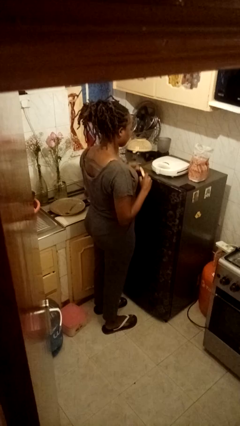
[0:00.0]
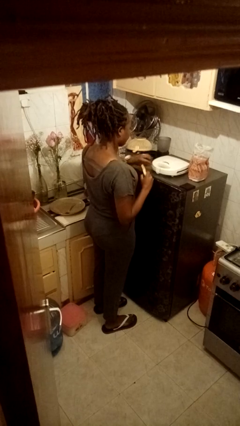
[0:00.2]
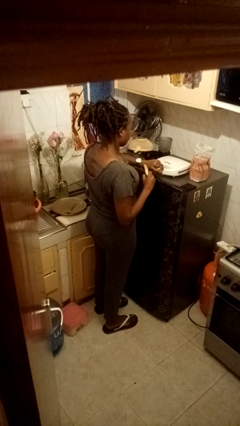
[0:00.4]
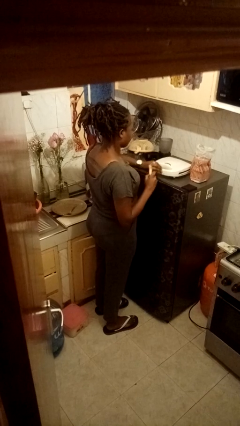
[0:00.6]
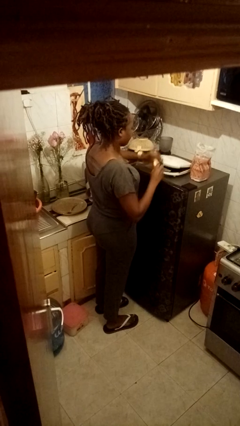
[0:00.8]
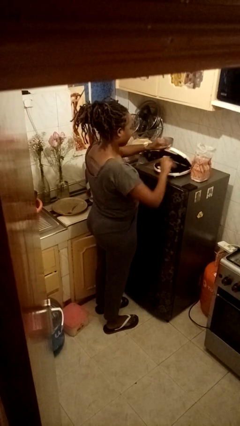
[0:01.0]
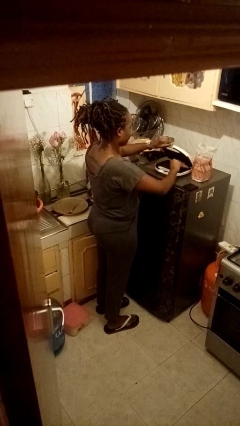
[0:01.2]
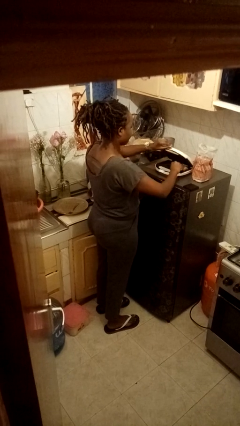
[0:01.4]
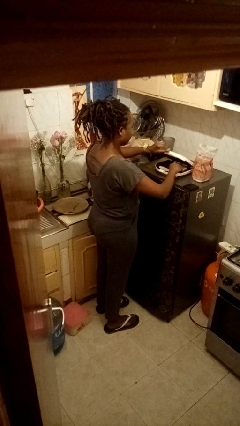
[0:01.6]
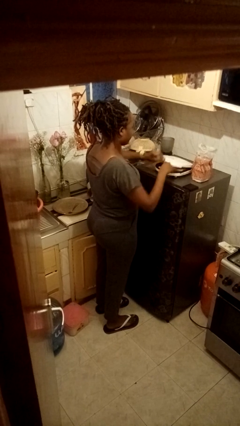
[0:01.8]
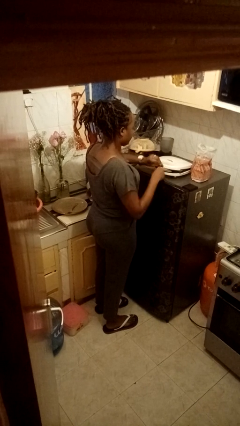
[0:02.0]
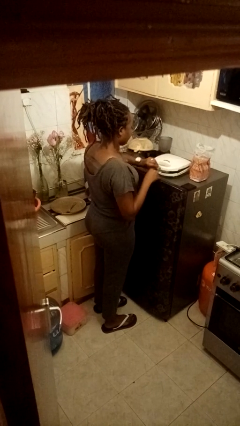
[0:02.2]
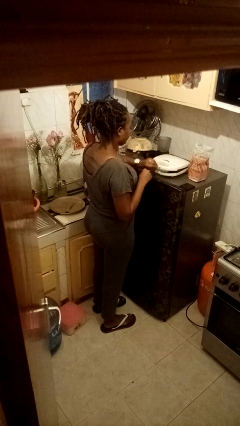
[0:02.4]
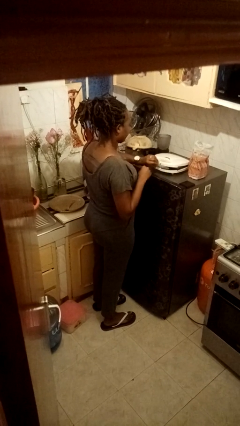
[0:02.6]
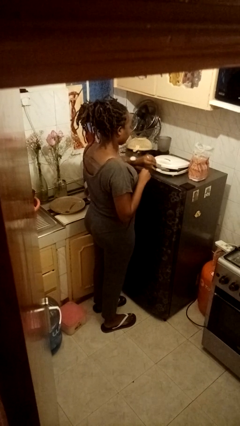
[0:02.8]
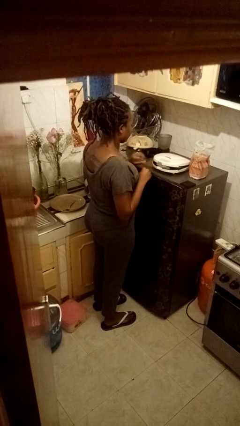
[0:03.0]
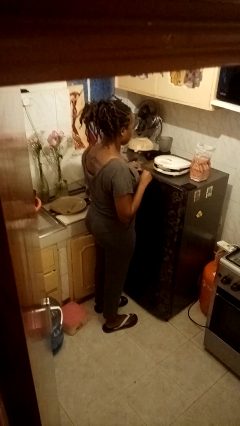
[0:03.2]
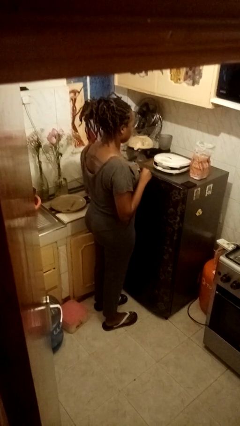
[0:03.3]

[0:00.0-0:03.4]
person puts object into toaster

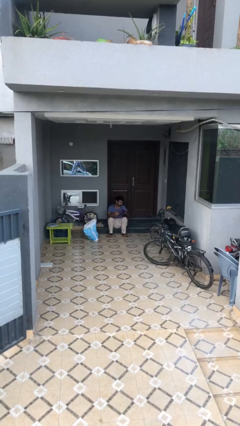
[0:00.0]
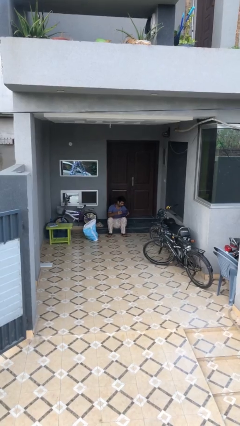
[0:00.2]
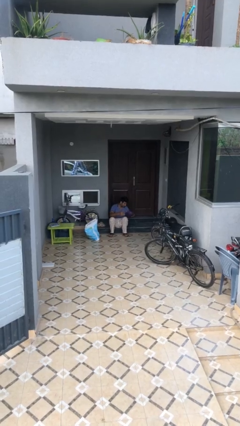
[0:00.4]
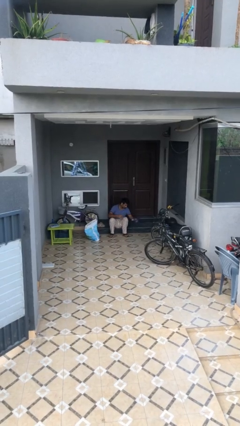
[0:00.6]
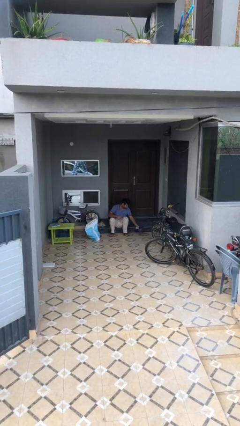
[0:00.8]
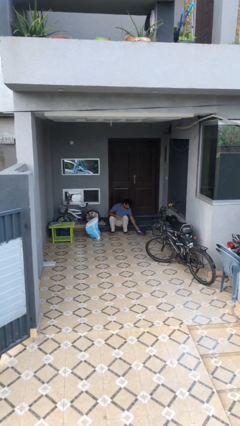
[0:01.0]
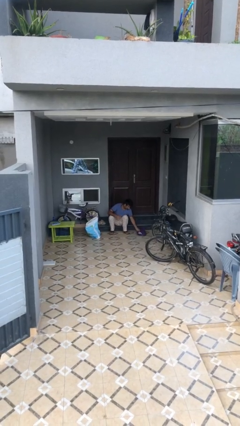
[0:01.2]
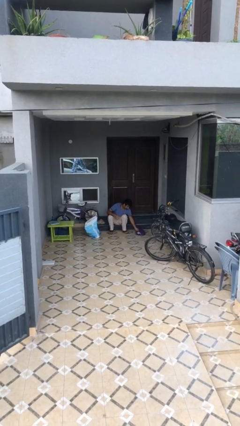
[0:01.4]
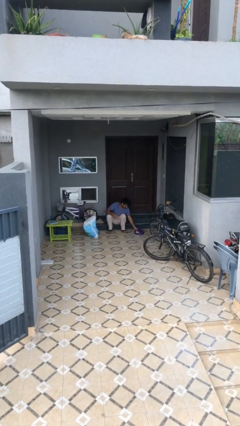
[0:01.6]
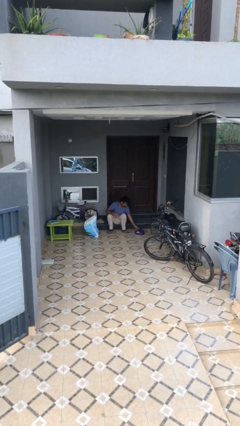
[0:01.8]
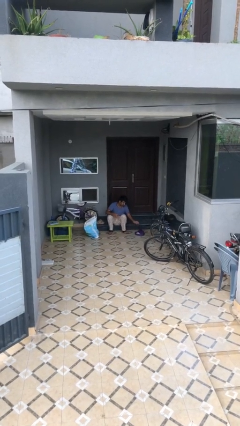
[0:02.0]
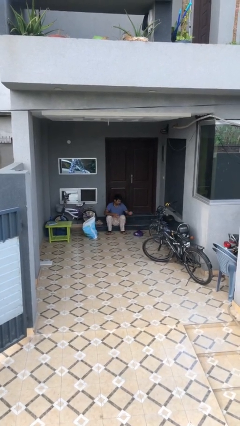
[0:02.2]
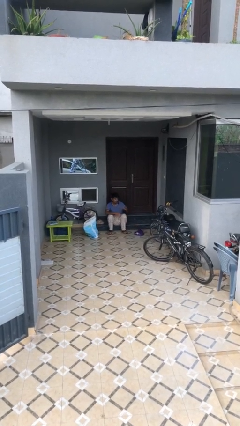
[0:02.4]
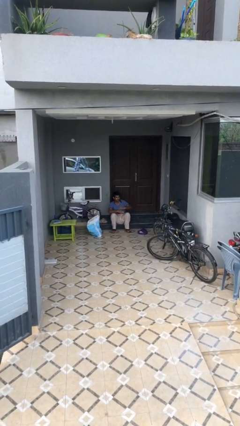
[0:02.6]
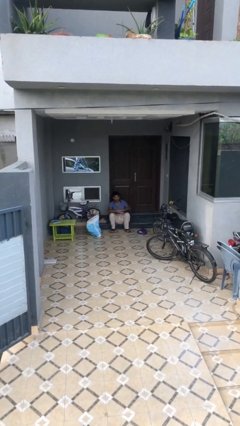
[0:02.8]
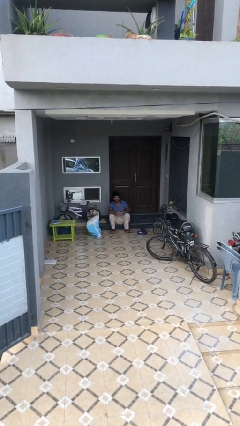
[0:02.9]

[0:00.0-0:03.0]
person puts down object on floor

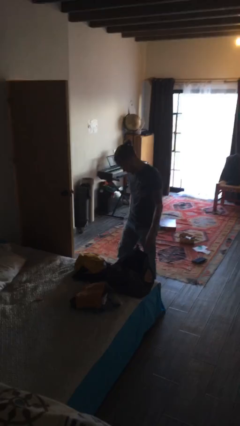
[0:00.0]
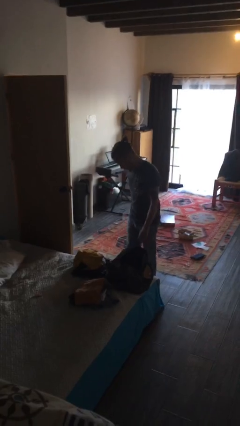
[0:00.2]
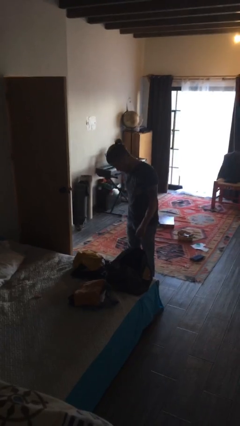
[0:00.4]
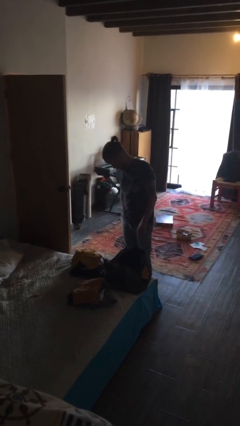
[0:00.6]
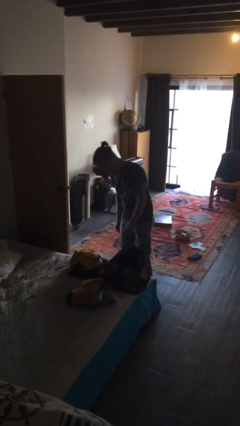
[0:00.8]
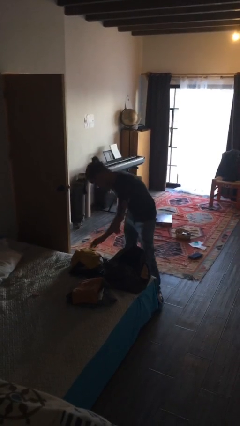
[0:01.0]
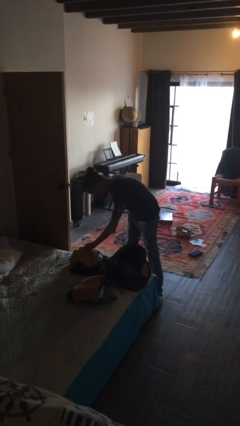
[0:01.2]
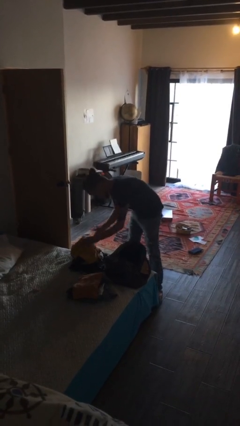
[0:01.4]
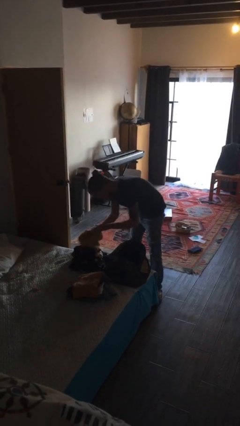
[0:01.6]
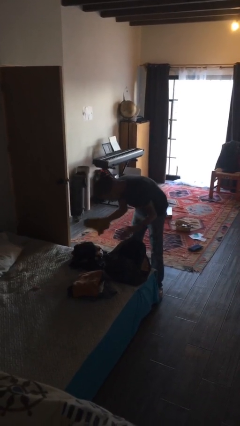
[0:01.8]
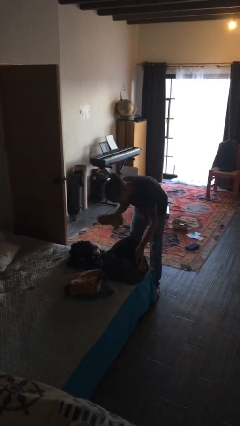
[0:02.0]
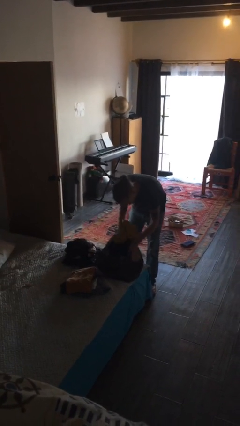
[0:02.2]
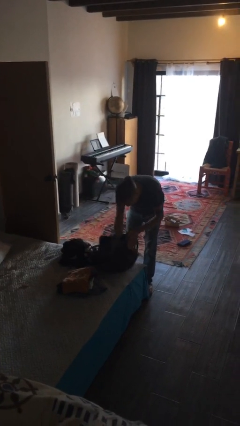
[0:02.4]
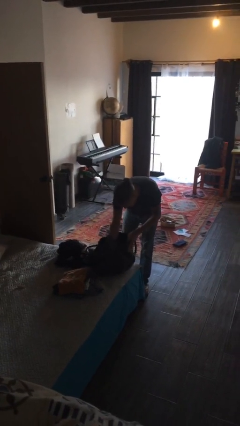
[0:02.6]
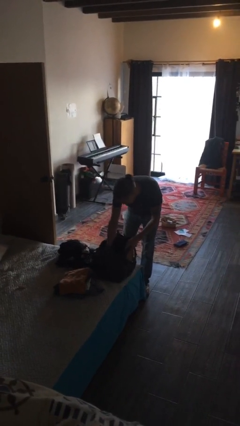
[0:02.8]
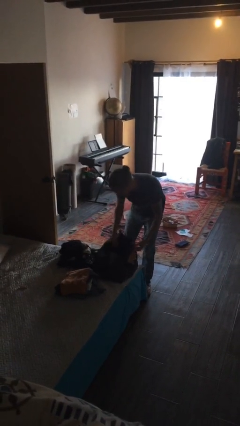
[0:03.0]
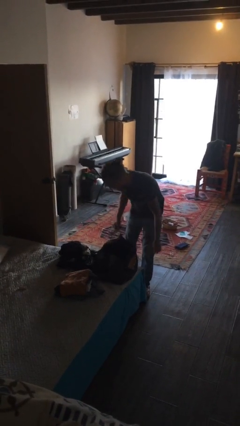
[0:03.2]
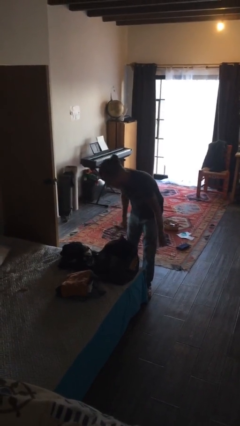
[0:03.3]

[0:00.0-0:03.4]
person loads clothes into suitcase

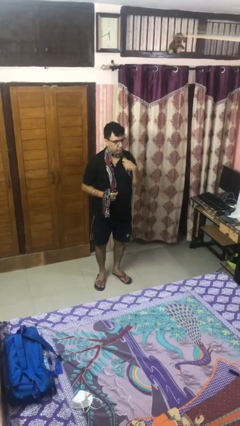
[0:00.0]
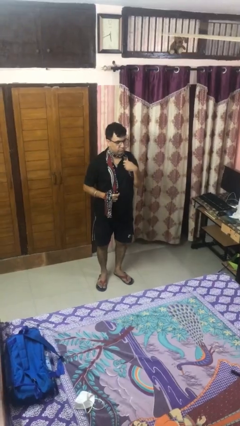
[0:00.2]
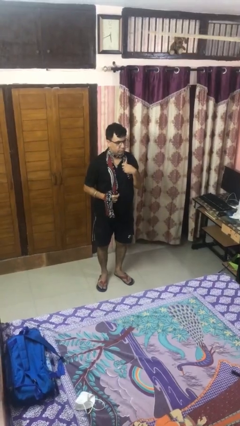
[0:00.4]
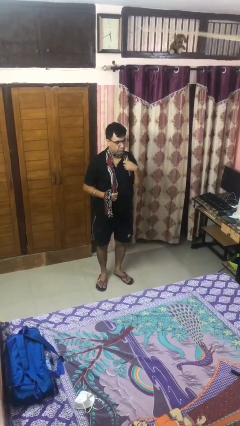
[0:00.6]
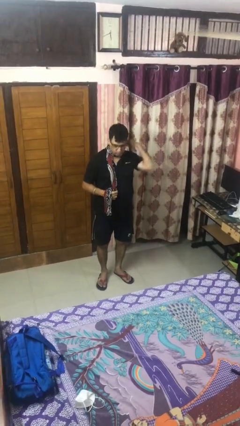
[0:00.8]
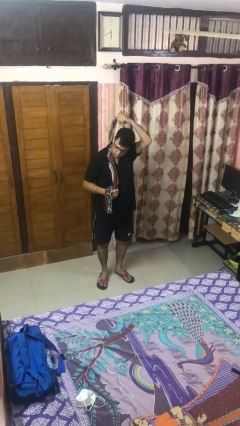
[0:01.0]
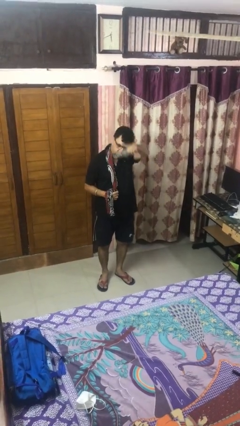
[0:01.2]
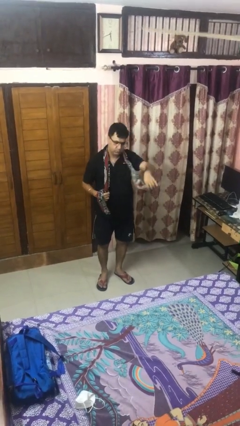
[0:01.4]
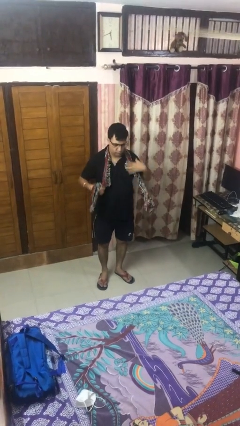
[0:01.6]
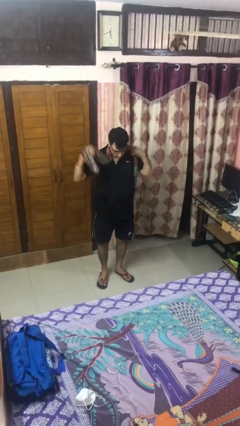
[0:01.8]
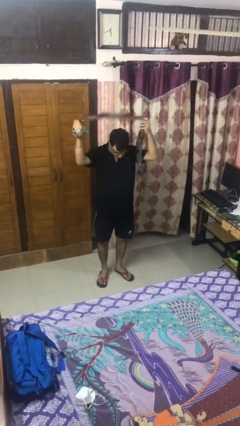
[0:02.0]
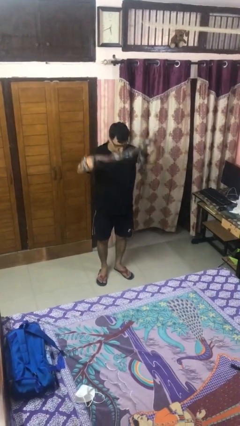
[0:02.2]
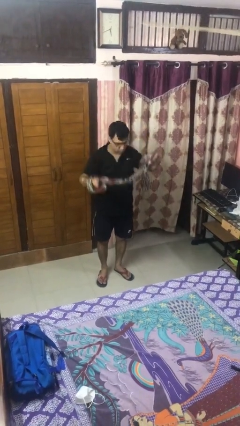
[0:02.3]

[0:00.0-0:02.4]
person takes off scarf

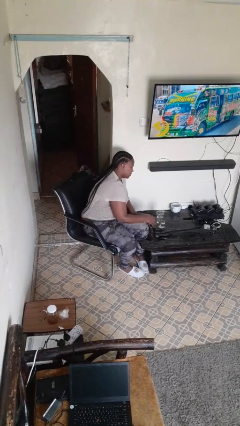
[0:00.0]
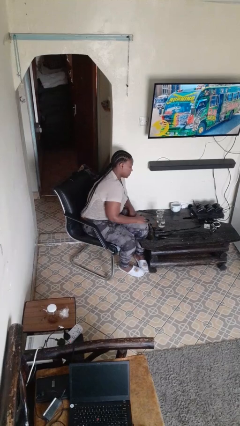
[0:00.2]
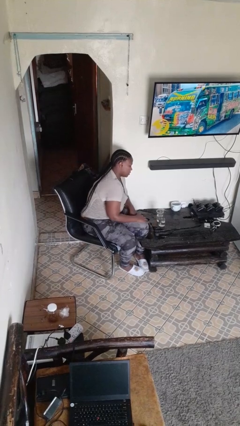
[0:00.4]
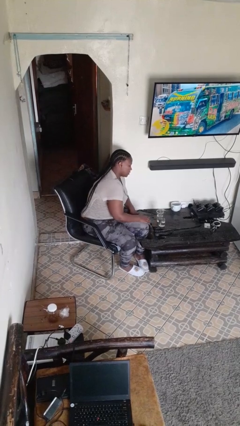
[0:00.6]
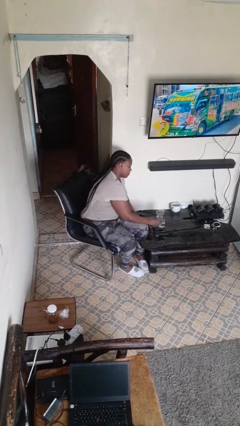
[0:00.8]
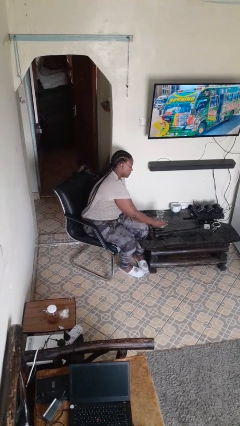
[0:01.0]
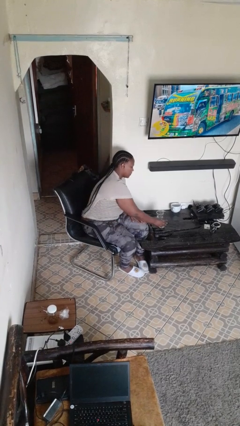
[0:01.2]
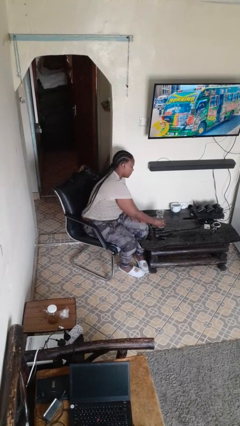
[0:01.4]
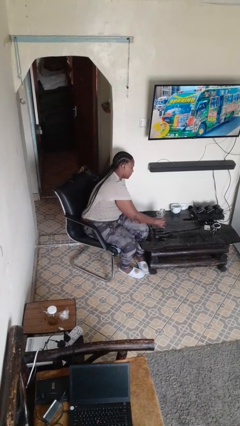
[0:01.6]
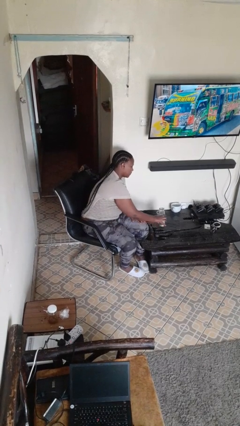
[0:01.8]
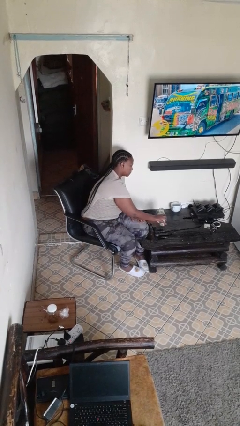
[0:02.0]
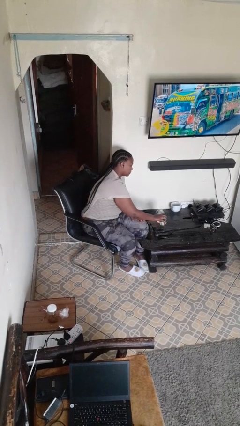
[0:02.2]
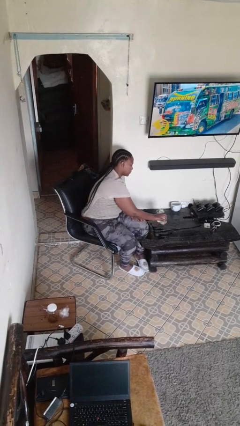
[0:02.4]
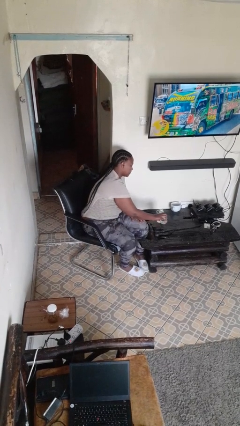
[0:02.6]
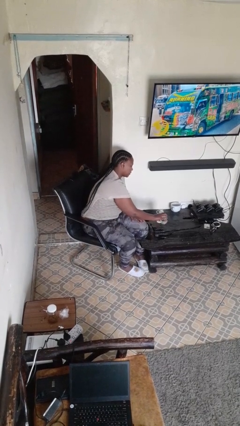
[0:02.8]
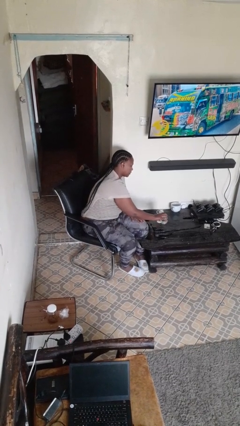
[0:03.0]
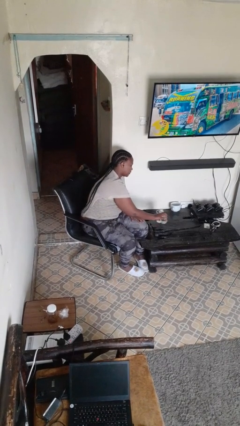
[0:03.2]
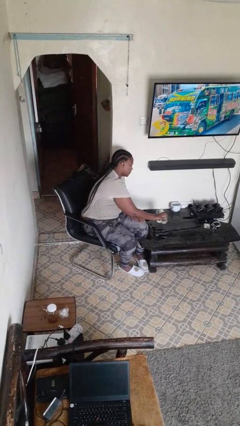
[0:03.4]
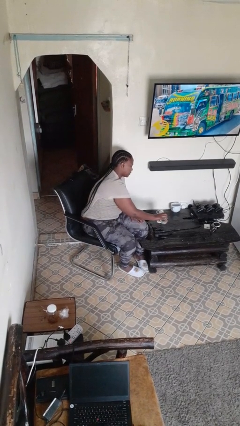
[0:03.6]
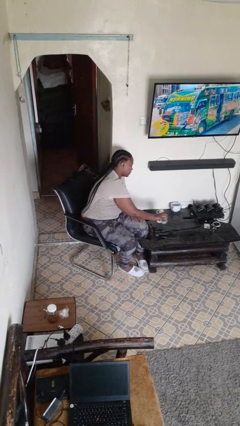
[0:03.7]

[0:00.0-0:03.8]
person pours liquid into cup

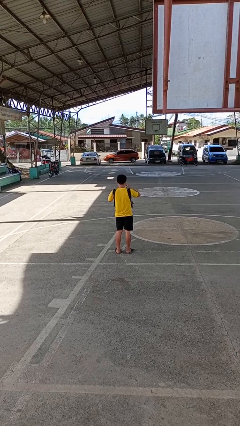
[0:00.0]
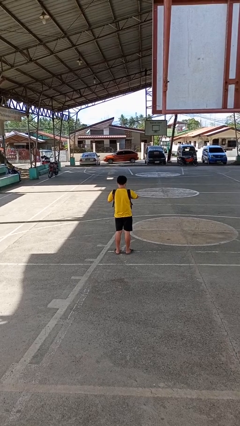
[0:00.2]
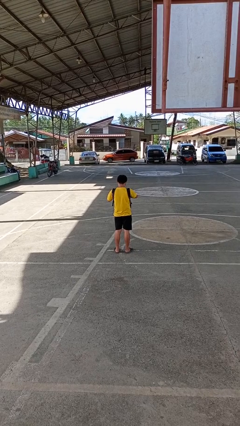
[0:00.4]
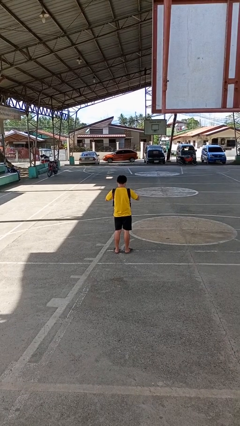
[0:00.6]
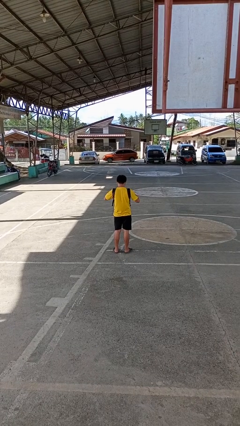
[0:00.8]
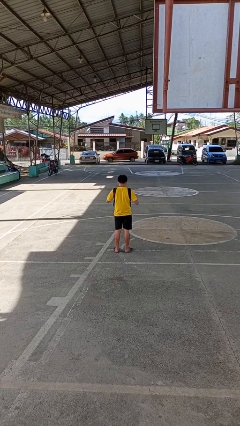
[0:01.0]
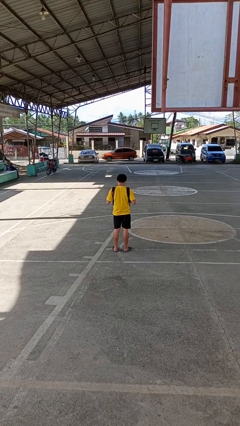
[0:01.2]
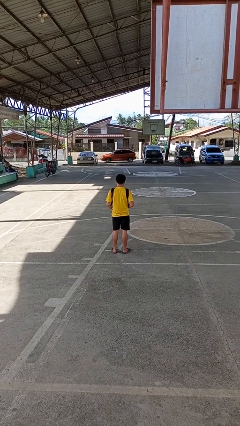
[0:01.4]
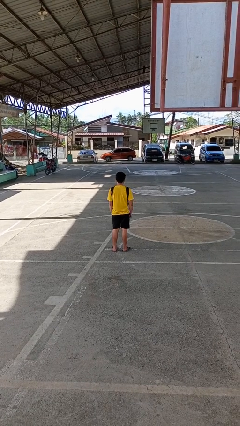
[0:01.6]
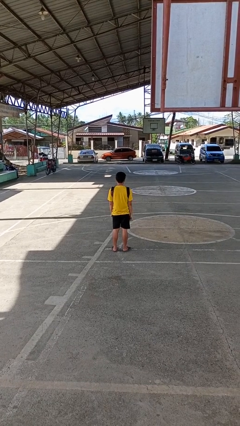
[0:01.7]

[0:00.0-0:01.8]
person puts object into backpack
